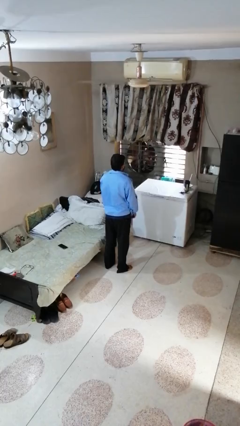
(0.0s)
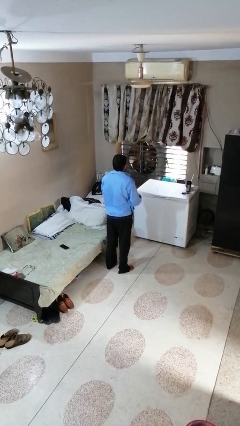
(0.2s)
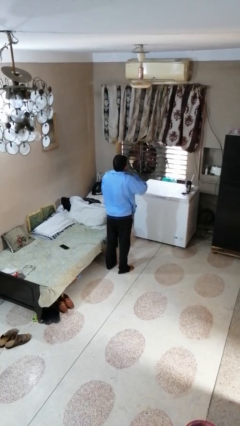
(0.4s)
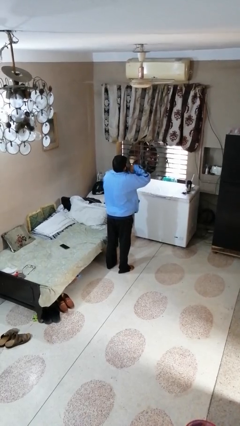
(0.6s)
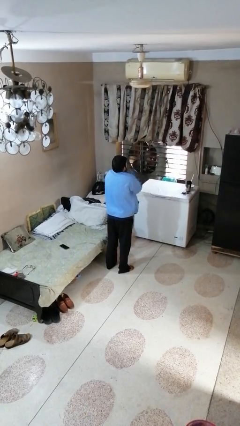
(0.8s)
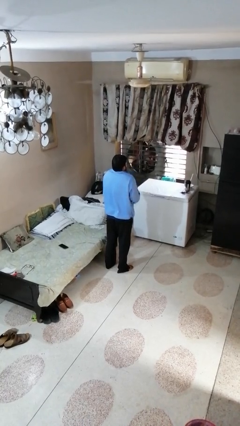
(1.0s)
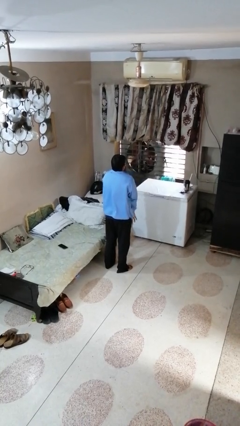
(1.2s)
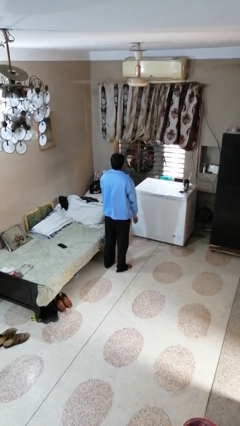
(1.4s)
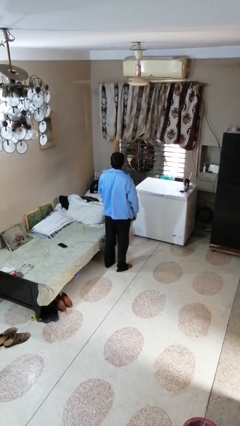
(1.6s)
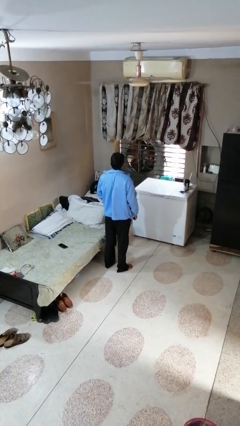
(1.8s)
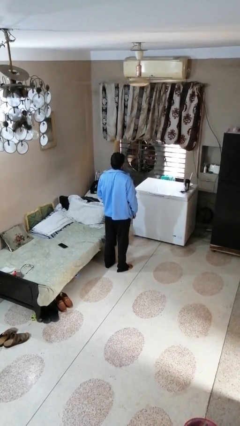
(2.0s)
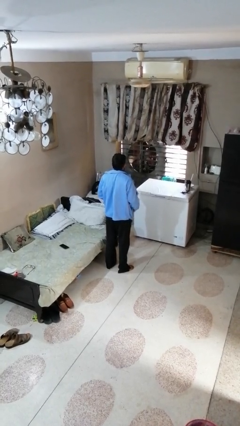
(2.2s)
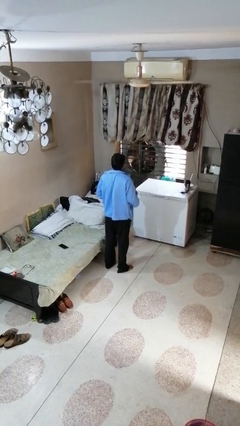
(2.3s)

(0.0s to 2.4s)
person unzips jacket

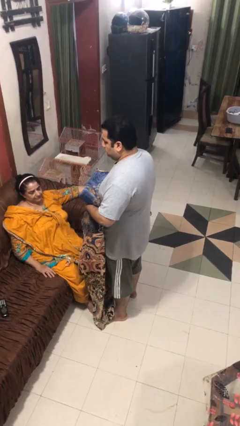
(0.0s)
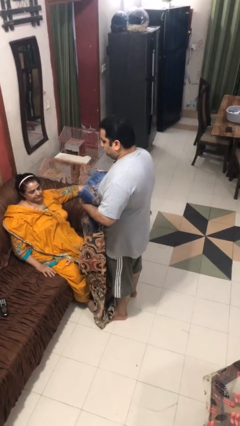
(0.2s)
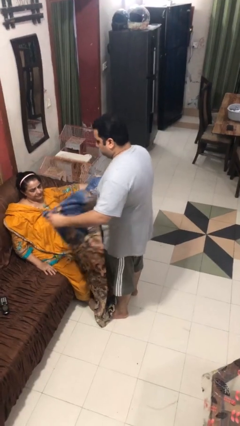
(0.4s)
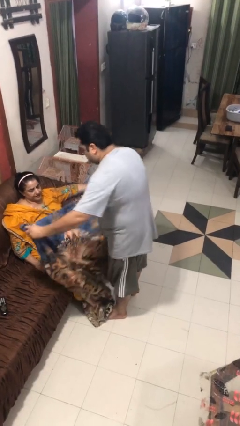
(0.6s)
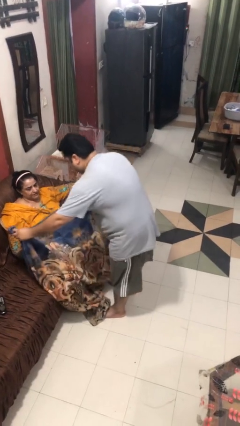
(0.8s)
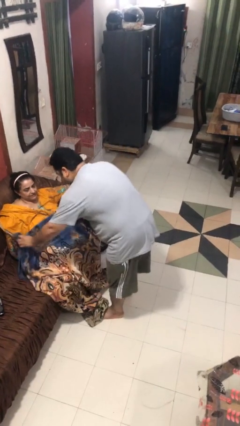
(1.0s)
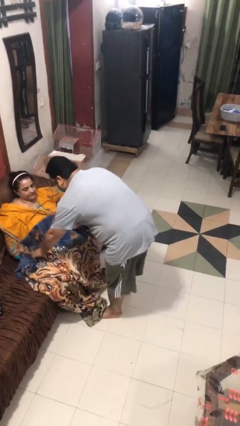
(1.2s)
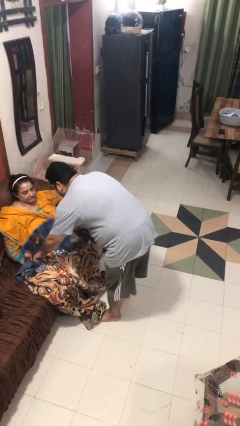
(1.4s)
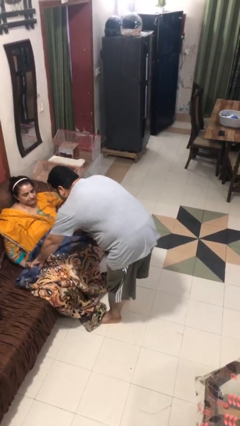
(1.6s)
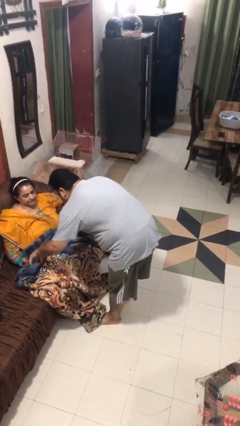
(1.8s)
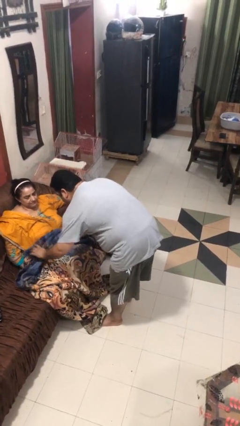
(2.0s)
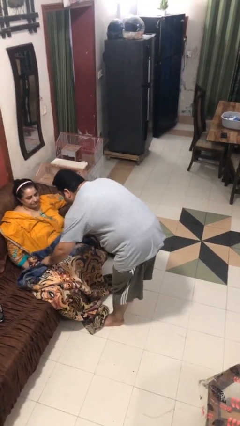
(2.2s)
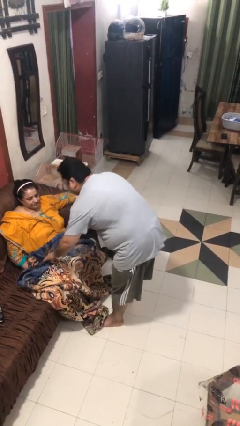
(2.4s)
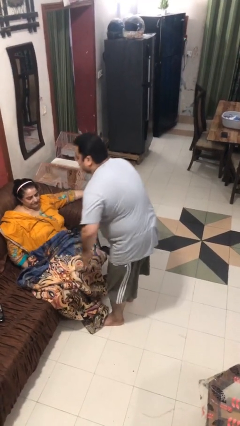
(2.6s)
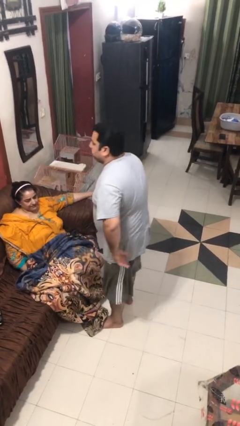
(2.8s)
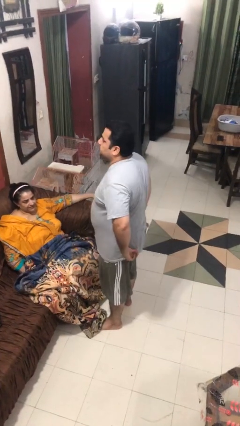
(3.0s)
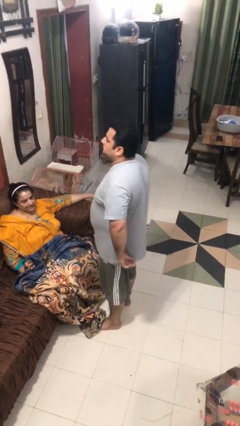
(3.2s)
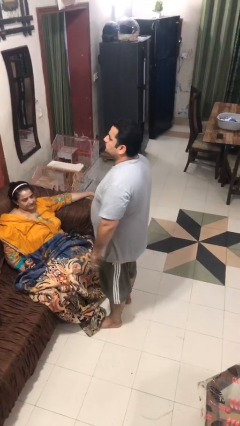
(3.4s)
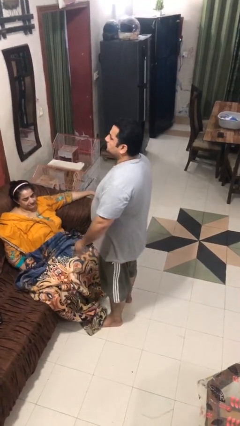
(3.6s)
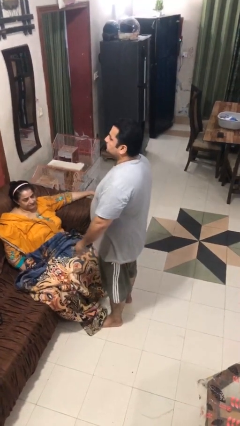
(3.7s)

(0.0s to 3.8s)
person covers friend with blanket

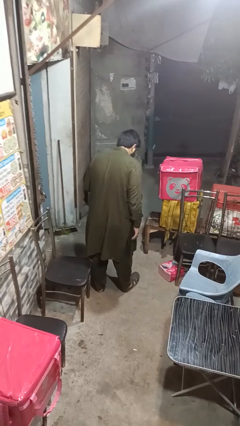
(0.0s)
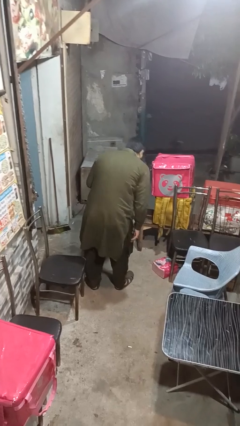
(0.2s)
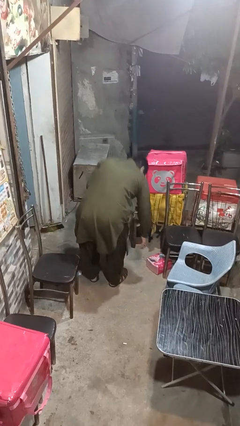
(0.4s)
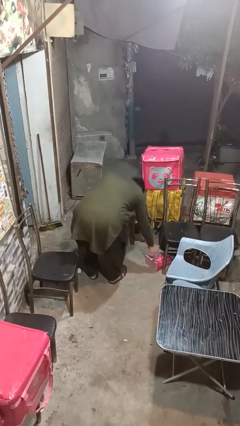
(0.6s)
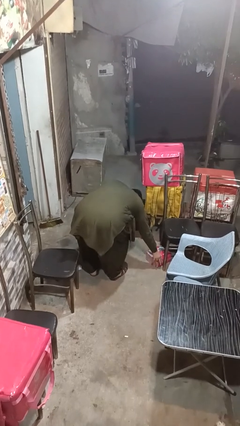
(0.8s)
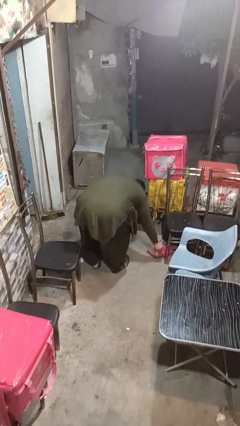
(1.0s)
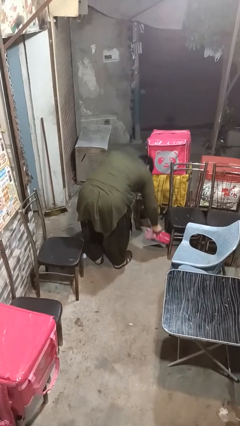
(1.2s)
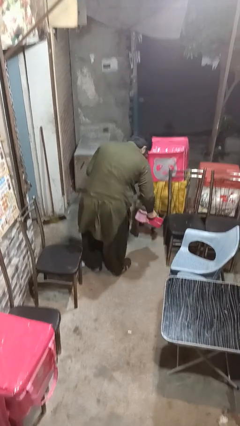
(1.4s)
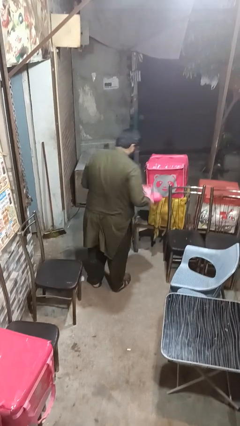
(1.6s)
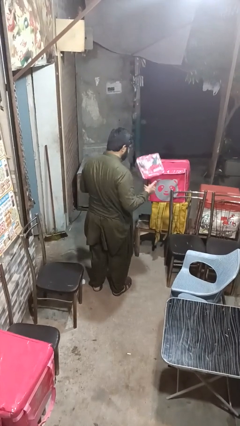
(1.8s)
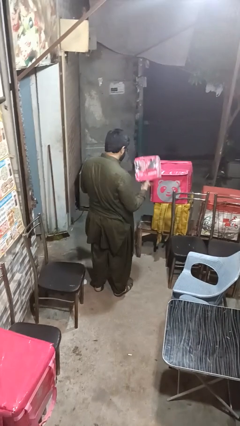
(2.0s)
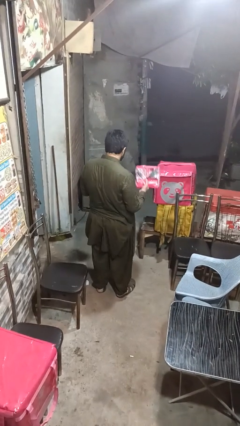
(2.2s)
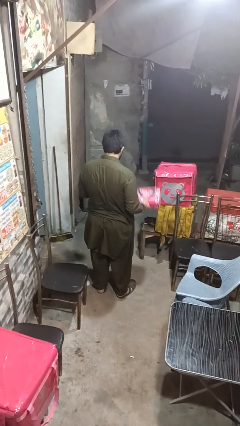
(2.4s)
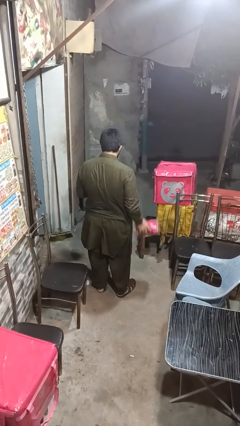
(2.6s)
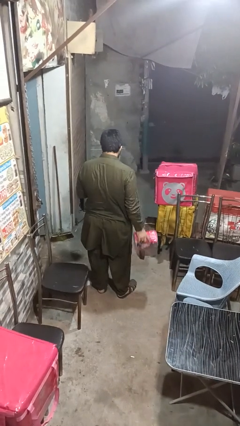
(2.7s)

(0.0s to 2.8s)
person picks up object from floor

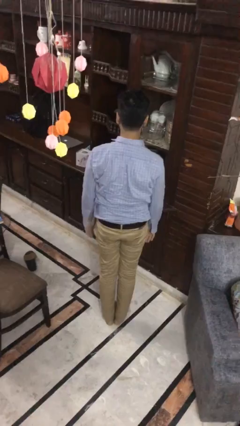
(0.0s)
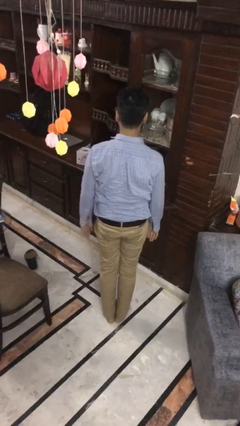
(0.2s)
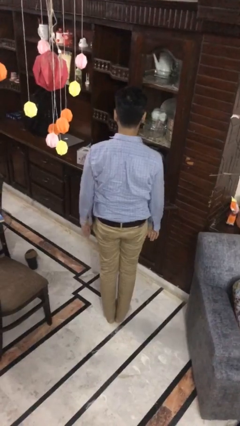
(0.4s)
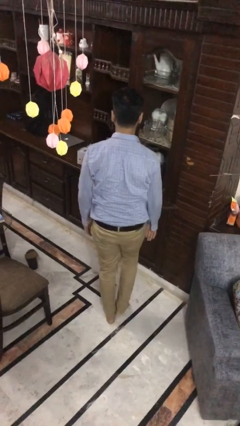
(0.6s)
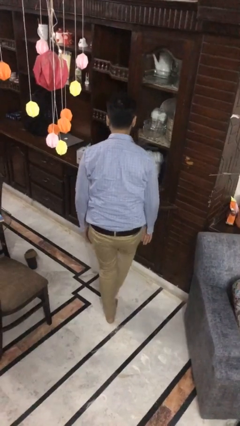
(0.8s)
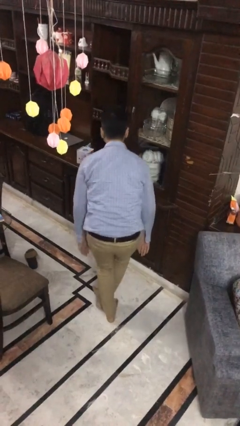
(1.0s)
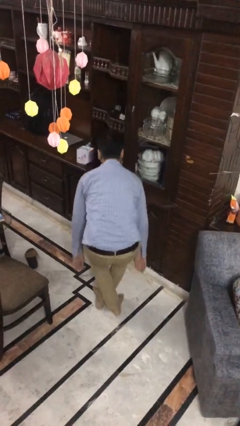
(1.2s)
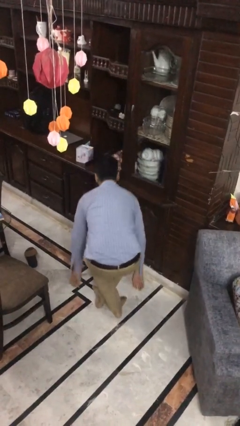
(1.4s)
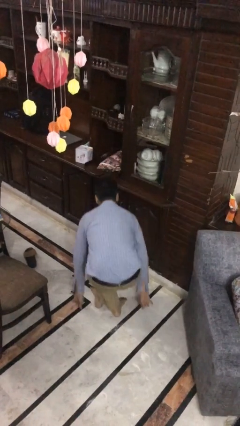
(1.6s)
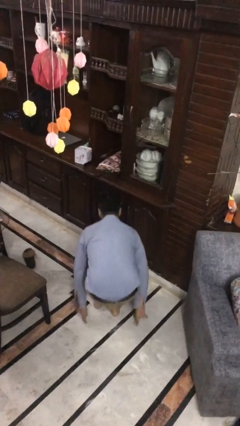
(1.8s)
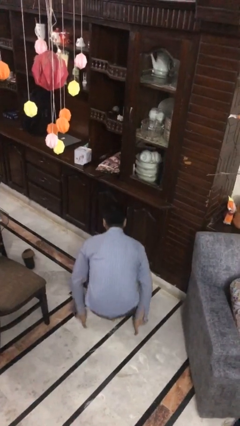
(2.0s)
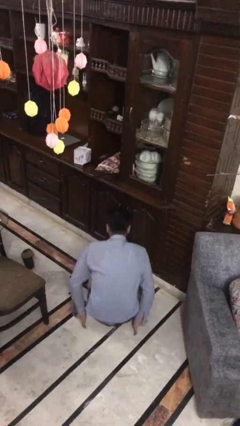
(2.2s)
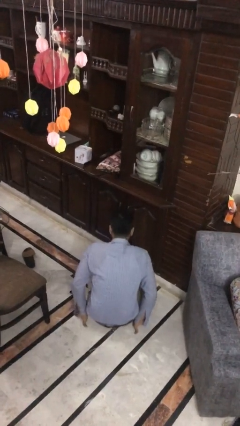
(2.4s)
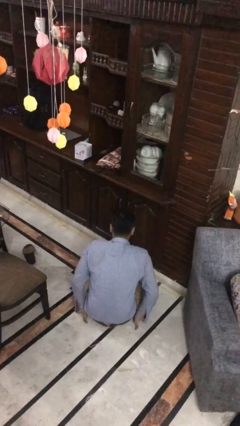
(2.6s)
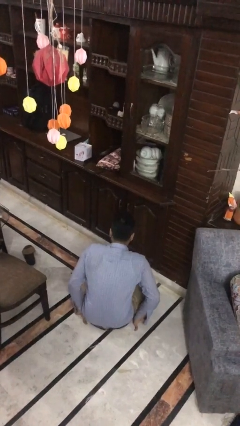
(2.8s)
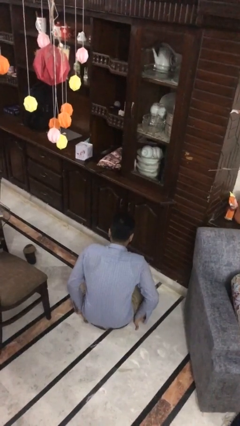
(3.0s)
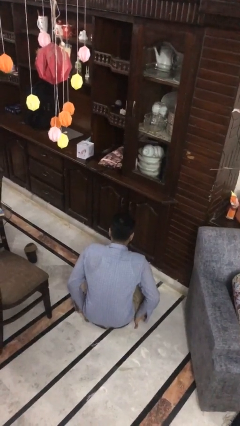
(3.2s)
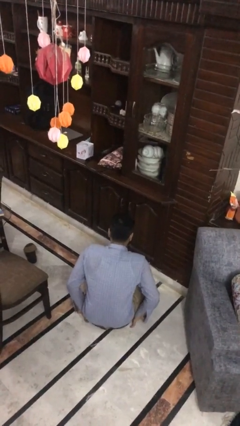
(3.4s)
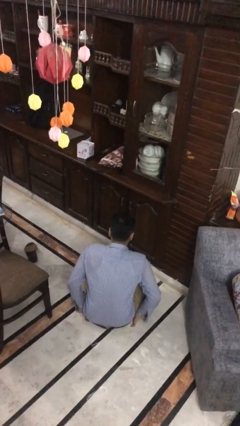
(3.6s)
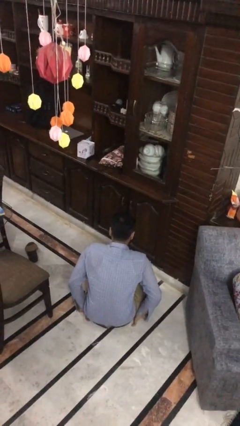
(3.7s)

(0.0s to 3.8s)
person sits crisscross

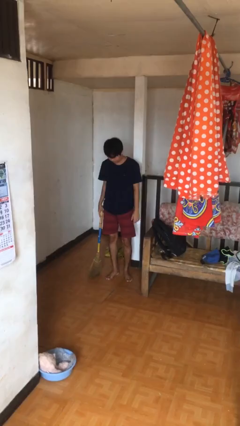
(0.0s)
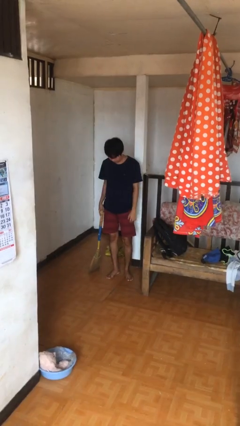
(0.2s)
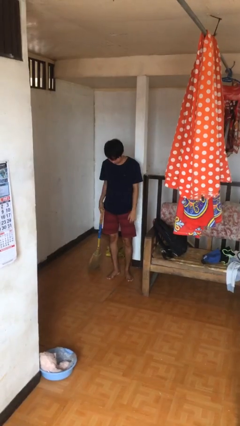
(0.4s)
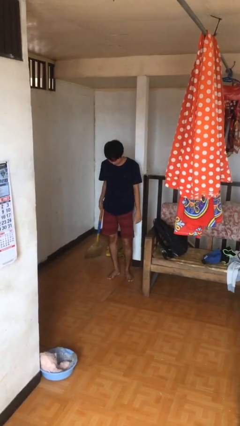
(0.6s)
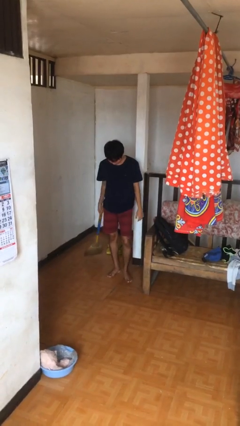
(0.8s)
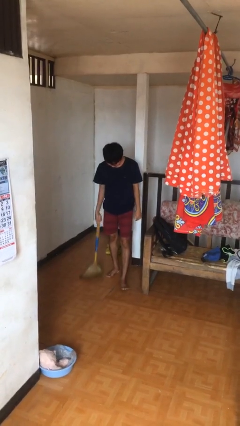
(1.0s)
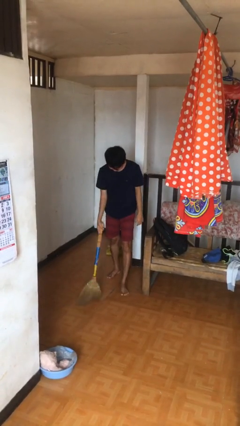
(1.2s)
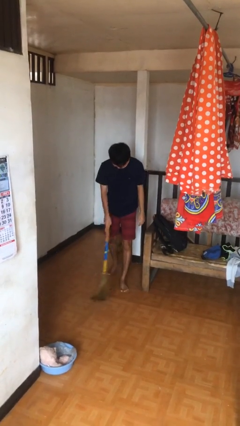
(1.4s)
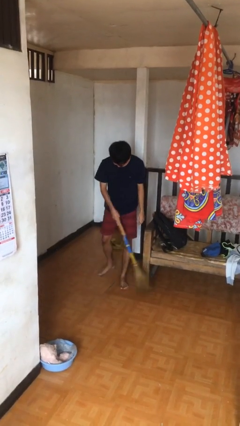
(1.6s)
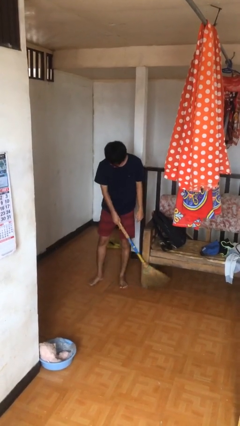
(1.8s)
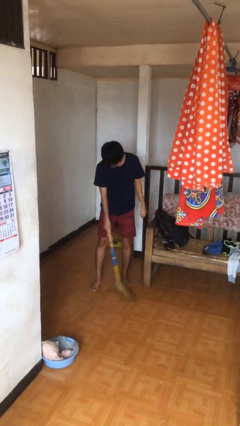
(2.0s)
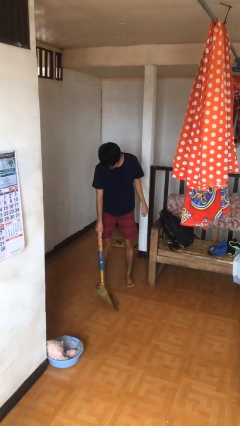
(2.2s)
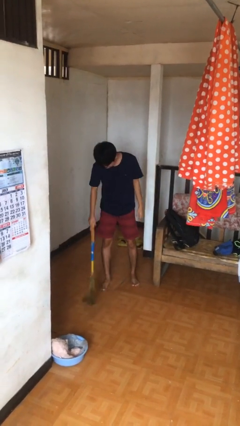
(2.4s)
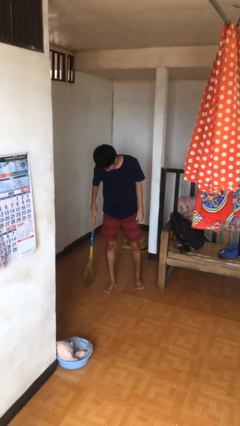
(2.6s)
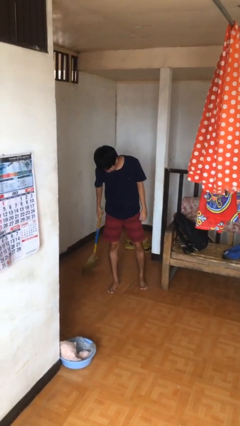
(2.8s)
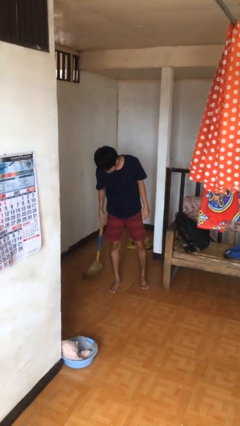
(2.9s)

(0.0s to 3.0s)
person sweeps floor

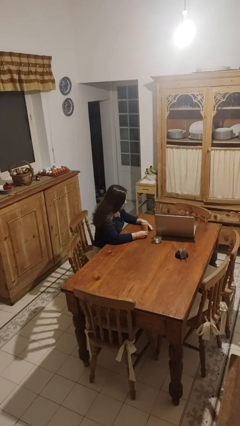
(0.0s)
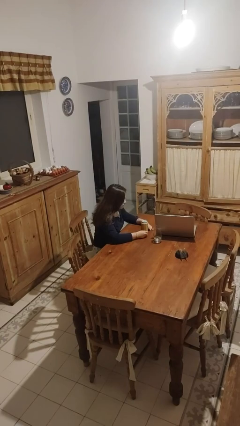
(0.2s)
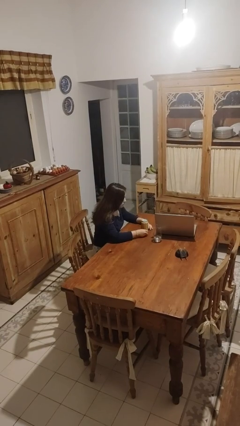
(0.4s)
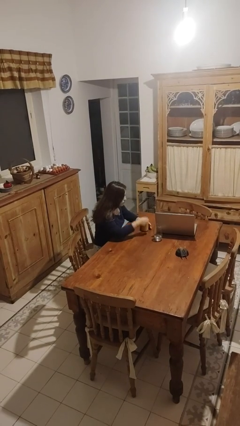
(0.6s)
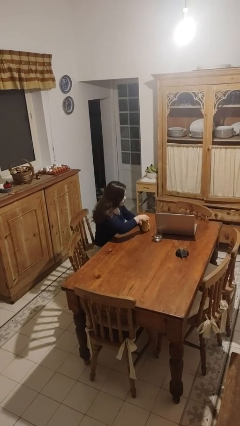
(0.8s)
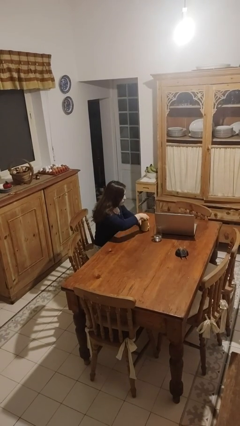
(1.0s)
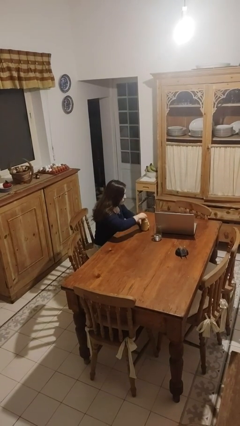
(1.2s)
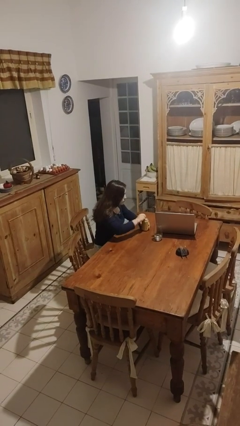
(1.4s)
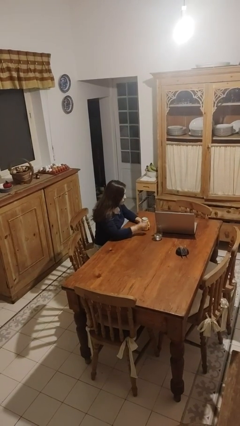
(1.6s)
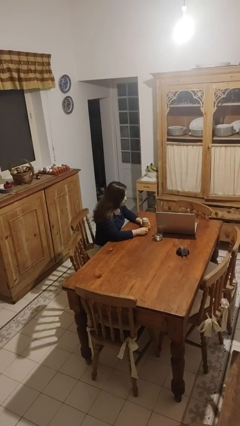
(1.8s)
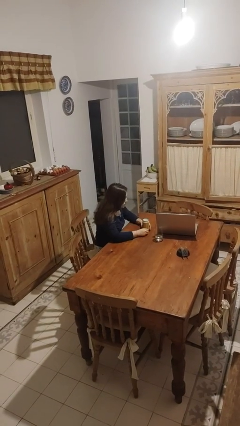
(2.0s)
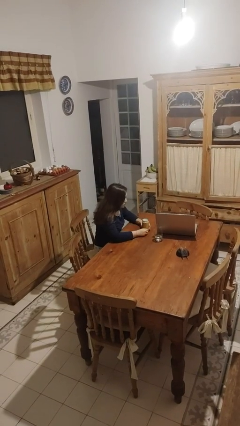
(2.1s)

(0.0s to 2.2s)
person opens beverage can
